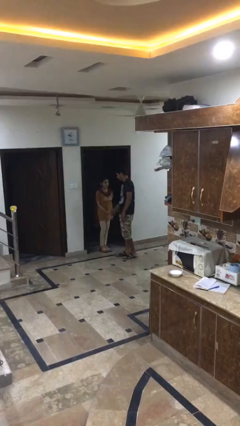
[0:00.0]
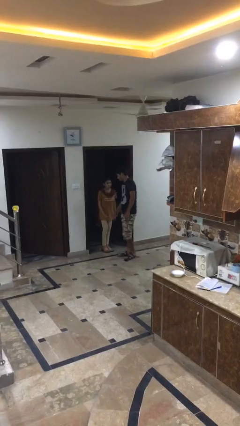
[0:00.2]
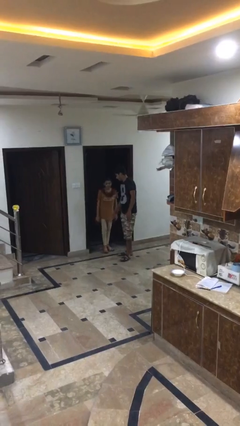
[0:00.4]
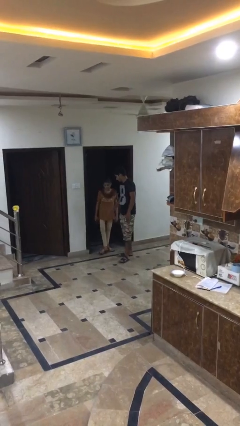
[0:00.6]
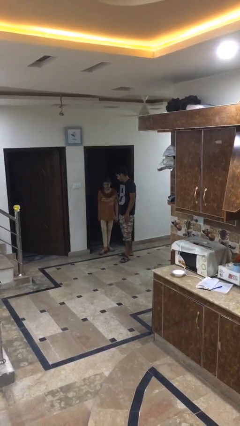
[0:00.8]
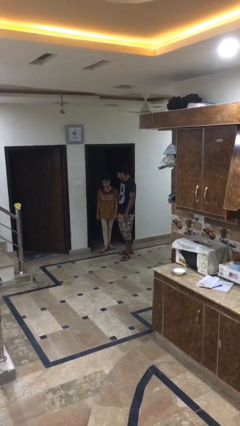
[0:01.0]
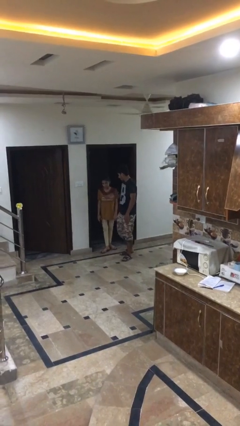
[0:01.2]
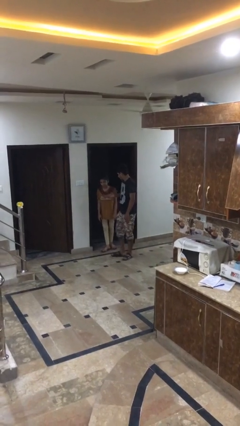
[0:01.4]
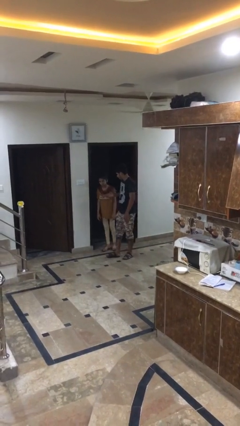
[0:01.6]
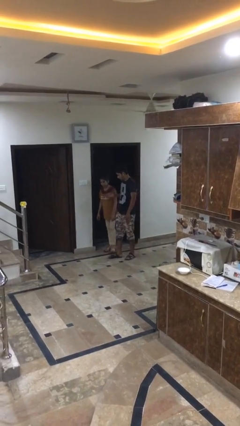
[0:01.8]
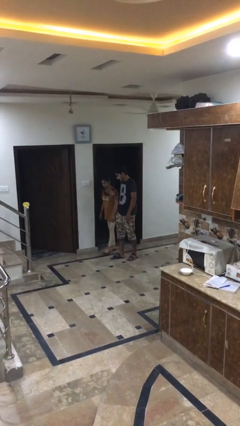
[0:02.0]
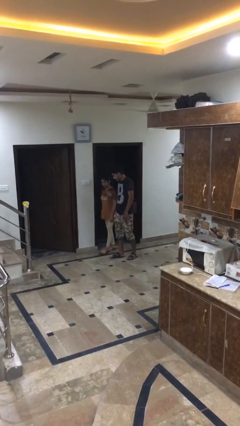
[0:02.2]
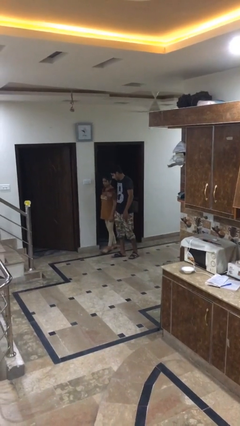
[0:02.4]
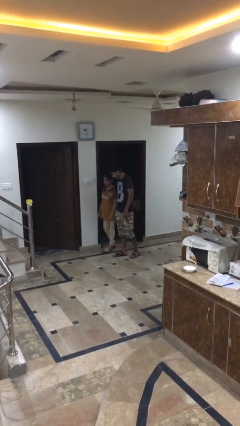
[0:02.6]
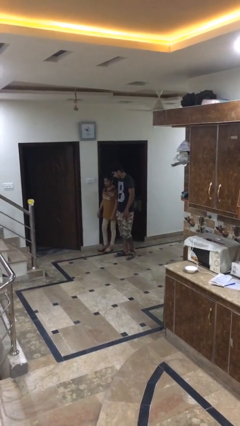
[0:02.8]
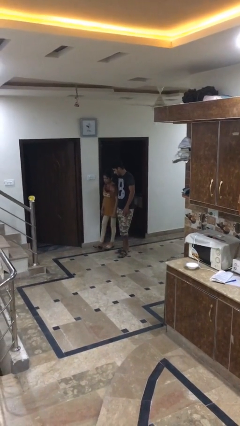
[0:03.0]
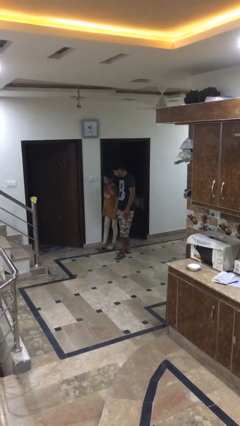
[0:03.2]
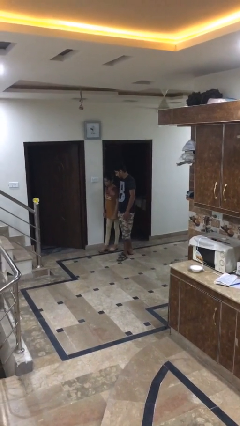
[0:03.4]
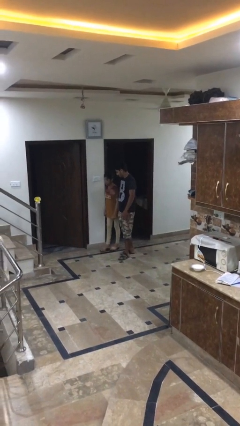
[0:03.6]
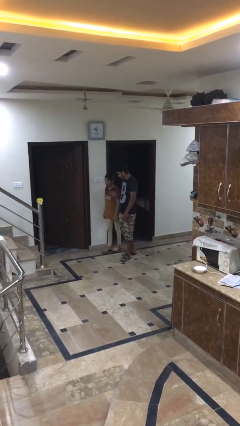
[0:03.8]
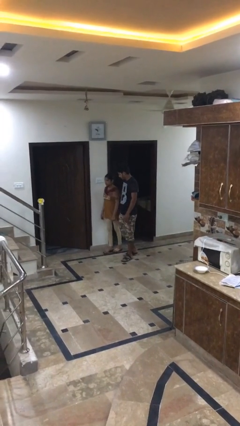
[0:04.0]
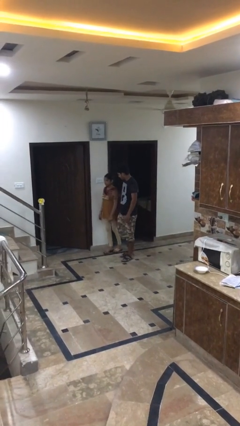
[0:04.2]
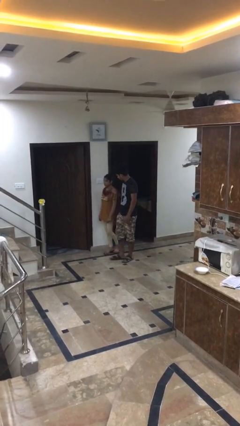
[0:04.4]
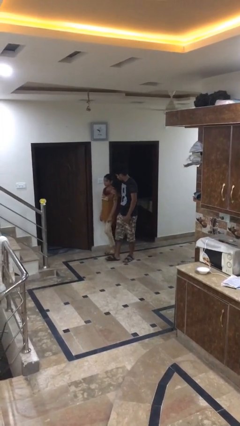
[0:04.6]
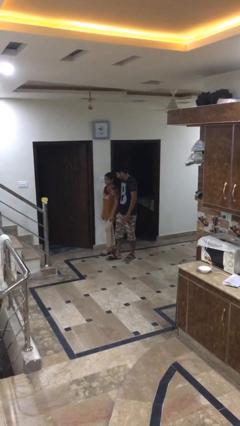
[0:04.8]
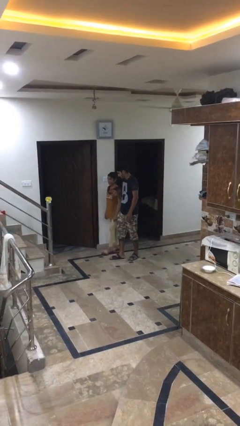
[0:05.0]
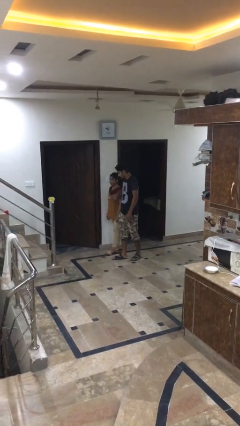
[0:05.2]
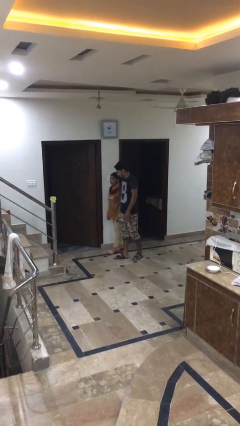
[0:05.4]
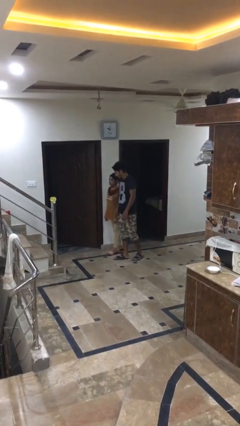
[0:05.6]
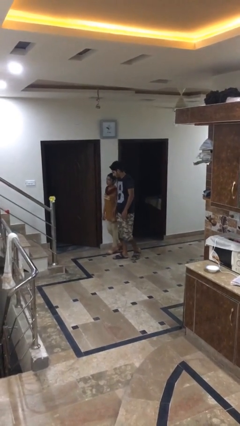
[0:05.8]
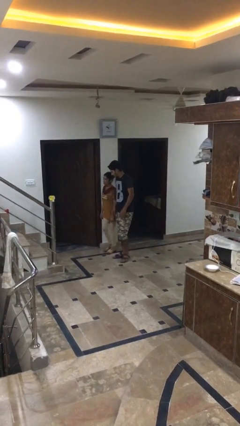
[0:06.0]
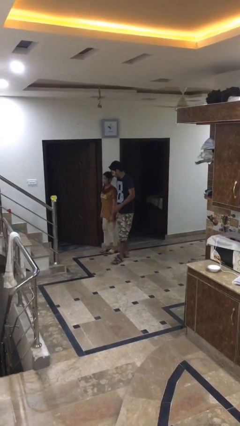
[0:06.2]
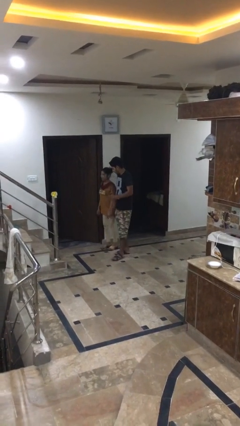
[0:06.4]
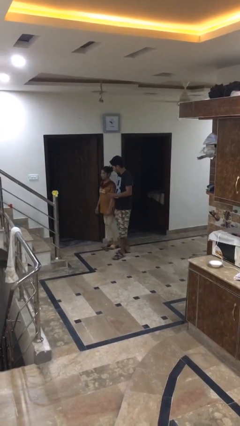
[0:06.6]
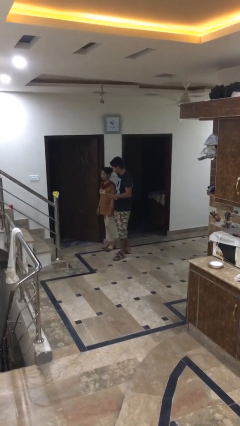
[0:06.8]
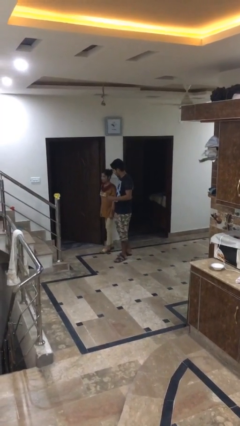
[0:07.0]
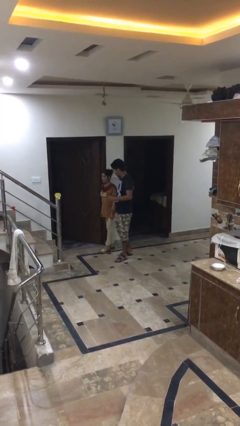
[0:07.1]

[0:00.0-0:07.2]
person talks to person

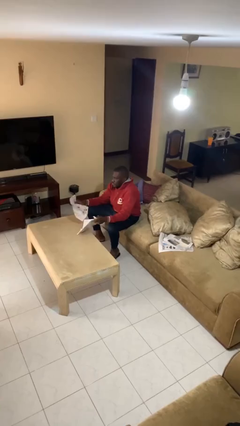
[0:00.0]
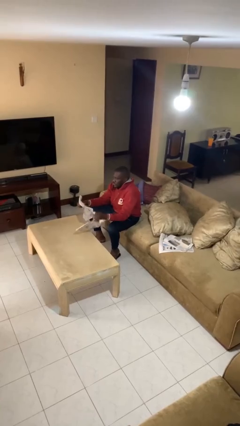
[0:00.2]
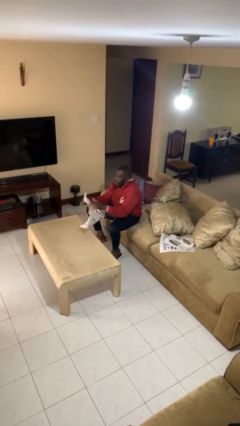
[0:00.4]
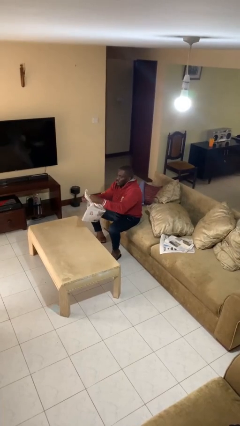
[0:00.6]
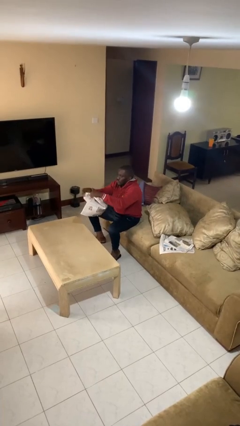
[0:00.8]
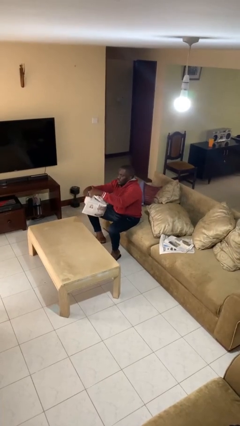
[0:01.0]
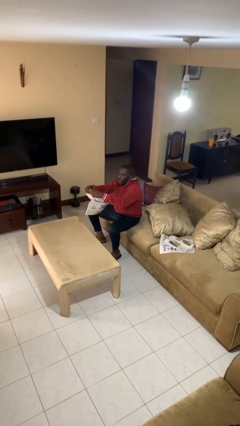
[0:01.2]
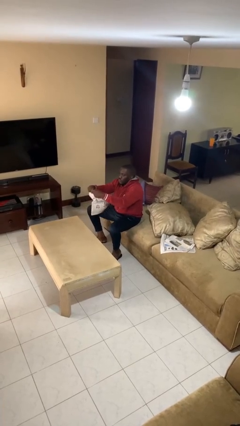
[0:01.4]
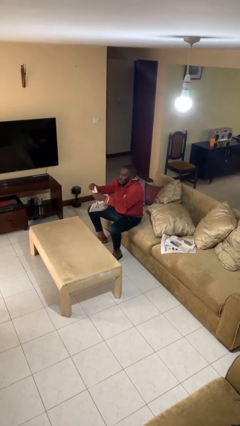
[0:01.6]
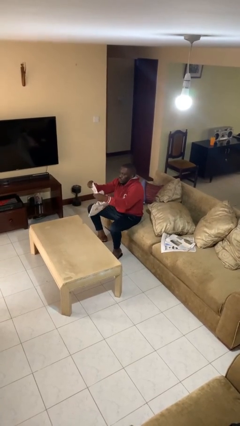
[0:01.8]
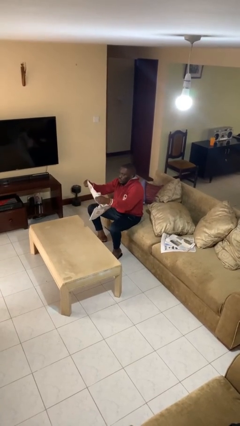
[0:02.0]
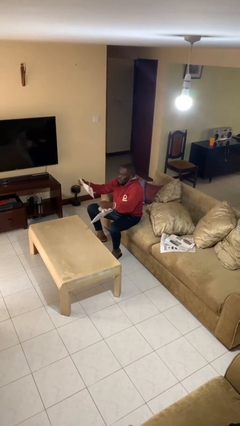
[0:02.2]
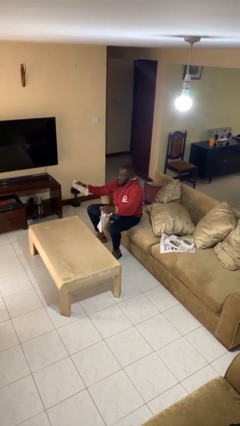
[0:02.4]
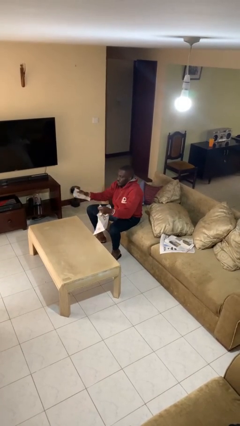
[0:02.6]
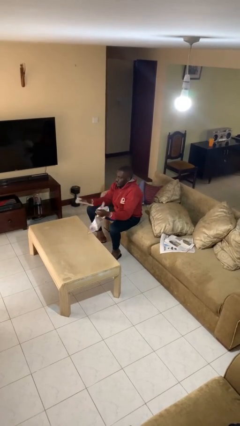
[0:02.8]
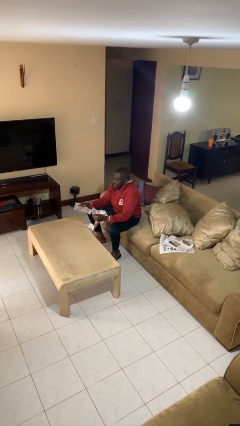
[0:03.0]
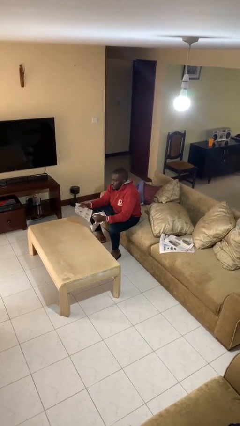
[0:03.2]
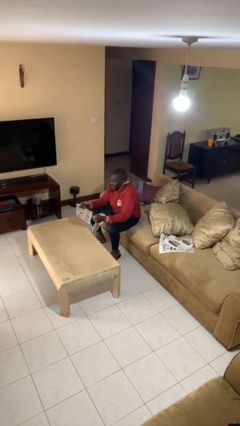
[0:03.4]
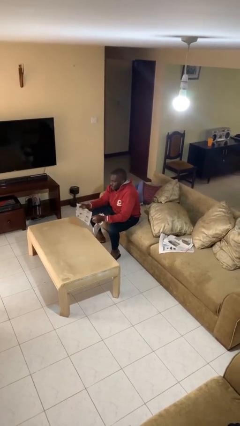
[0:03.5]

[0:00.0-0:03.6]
person tears paper

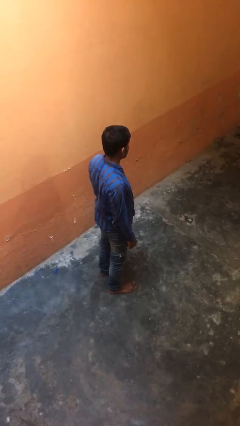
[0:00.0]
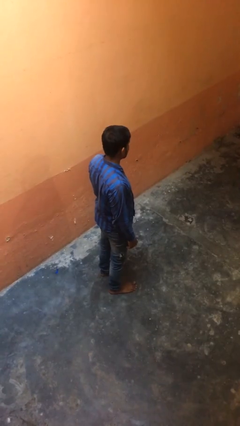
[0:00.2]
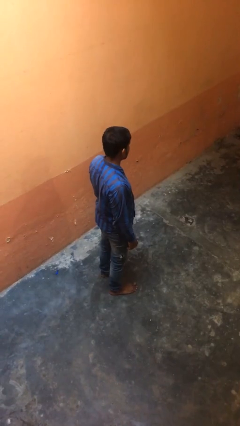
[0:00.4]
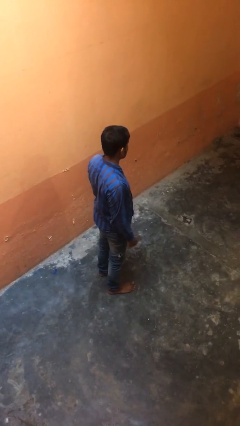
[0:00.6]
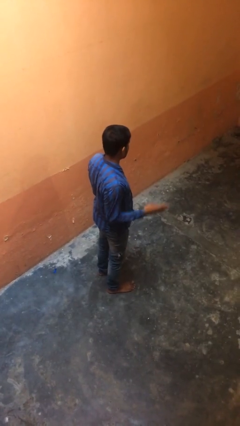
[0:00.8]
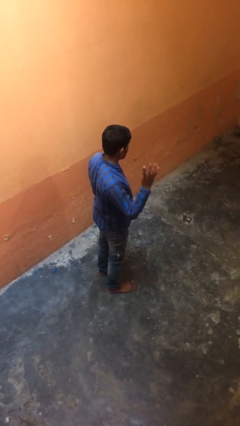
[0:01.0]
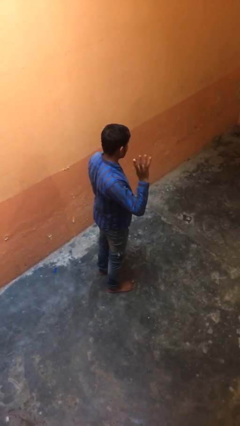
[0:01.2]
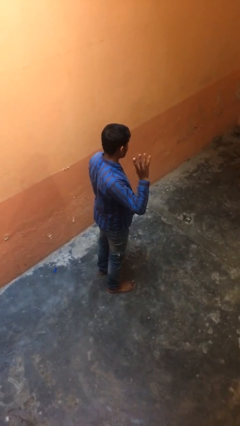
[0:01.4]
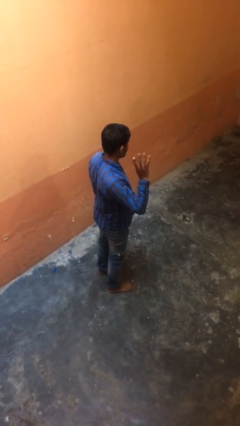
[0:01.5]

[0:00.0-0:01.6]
person gestures number four

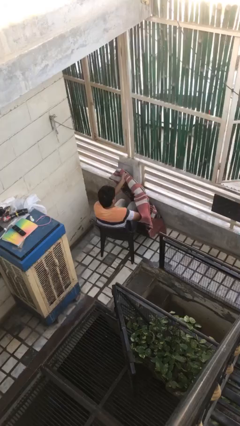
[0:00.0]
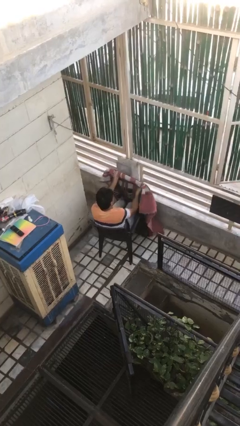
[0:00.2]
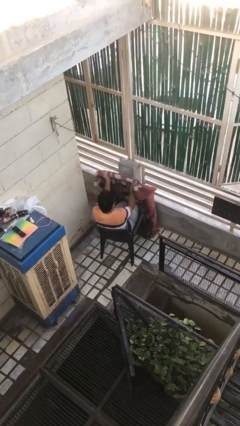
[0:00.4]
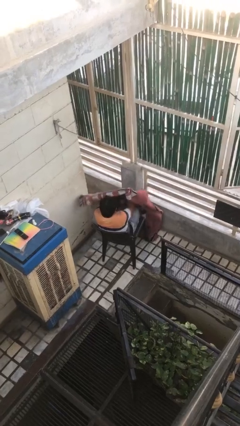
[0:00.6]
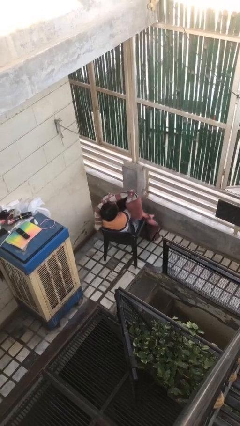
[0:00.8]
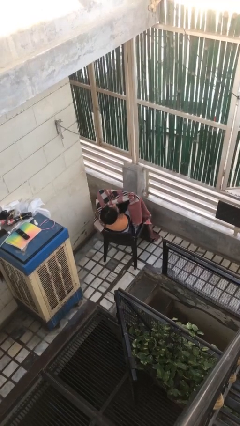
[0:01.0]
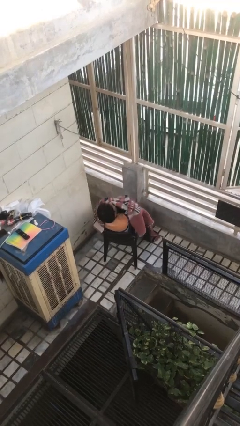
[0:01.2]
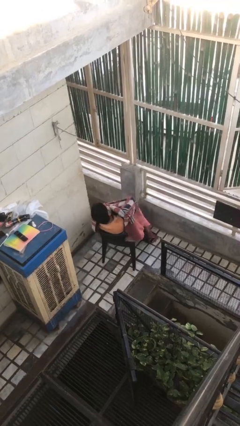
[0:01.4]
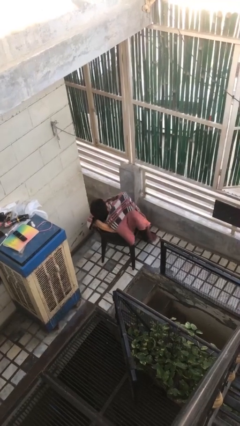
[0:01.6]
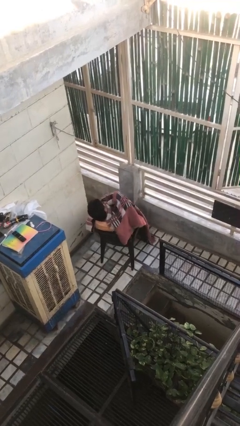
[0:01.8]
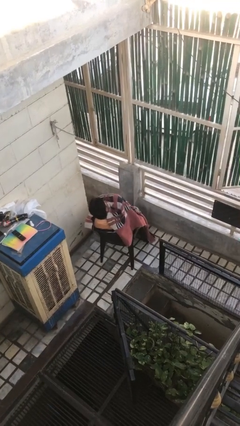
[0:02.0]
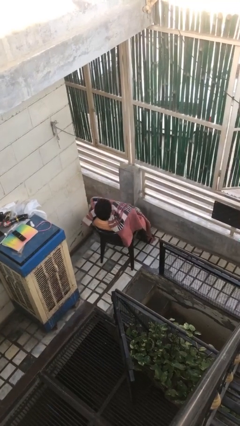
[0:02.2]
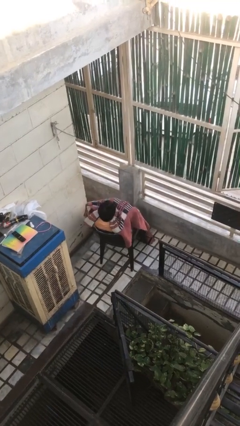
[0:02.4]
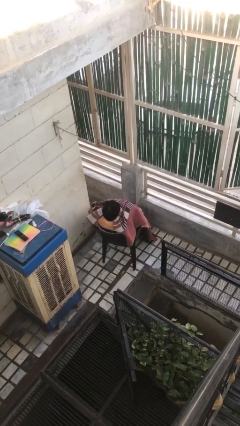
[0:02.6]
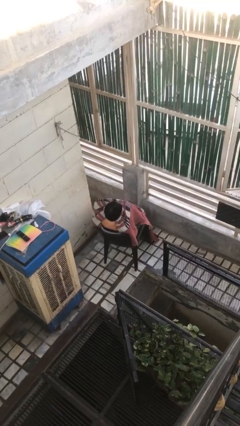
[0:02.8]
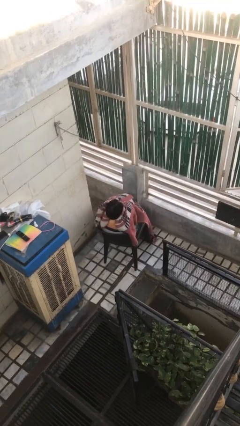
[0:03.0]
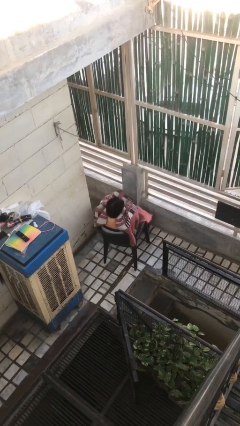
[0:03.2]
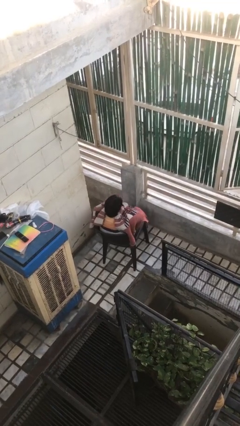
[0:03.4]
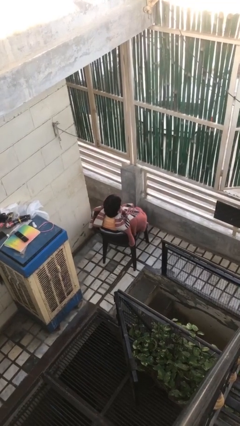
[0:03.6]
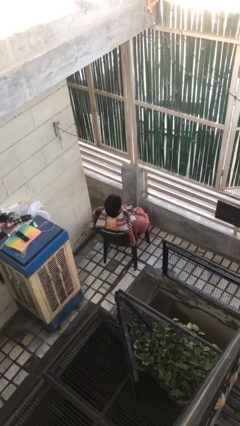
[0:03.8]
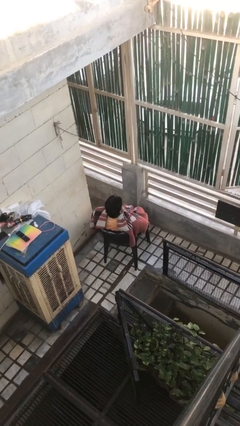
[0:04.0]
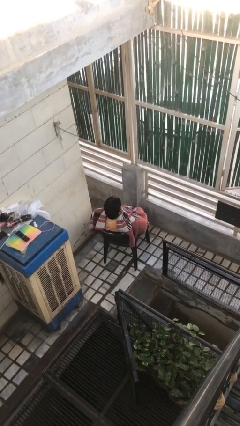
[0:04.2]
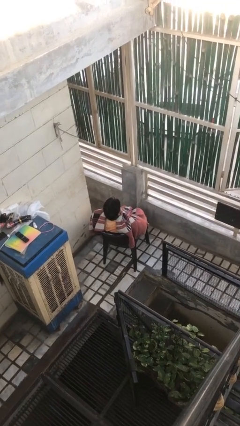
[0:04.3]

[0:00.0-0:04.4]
person covers with blanket

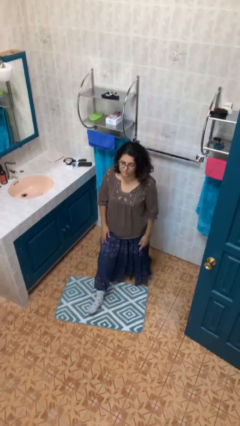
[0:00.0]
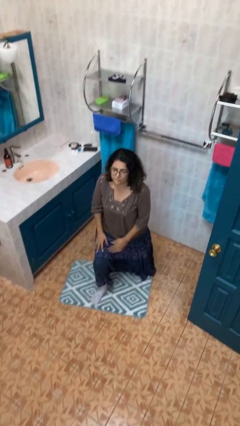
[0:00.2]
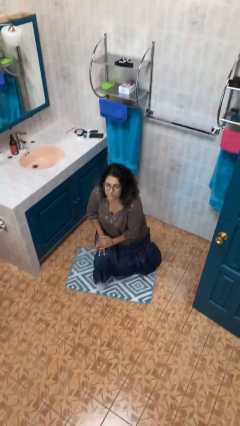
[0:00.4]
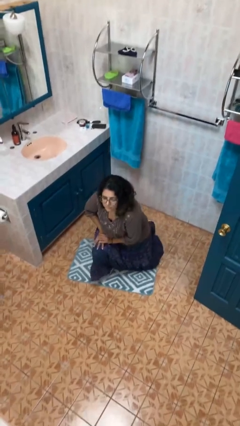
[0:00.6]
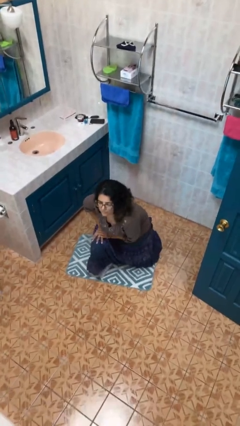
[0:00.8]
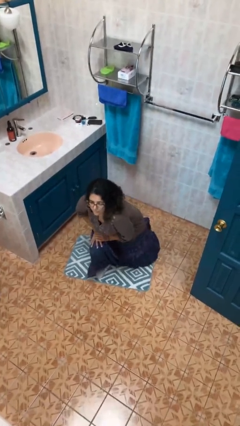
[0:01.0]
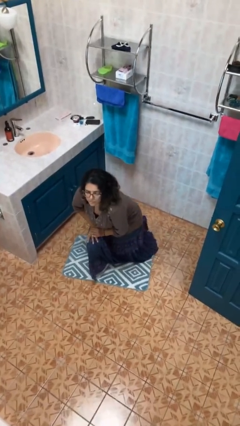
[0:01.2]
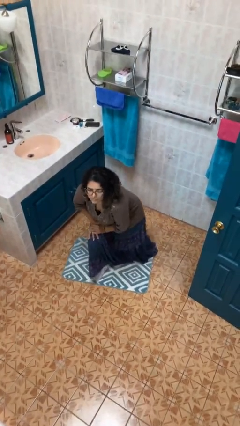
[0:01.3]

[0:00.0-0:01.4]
person kneels
